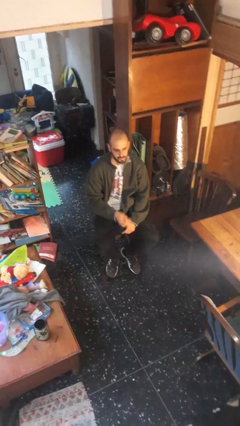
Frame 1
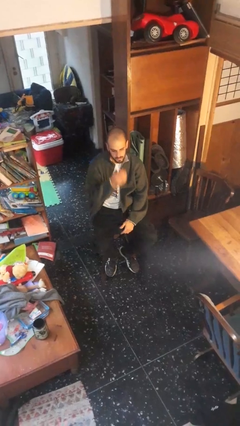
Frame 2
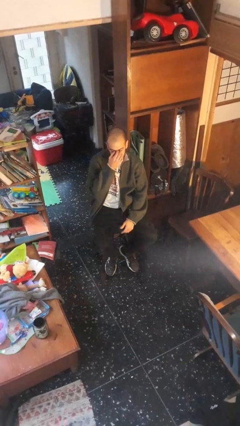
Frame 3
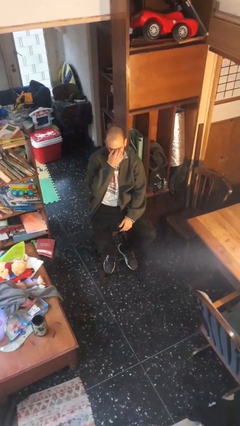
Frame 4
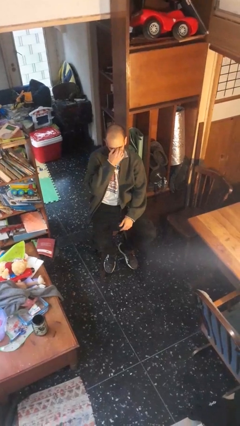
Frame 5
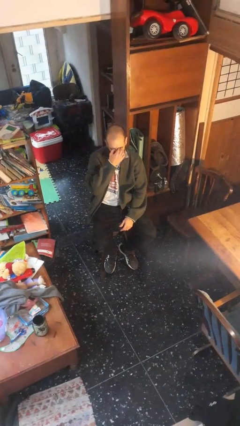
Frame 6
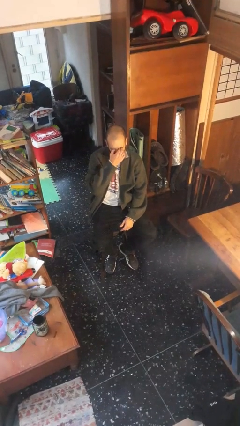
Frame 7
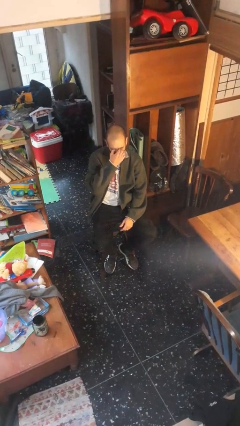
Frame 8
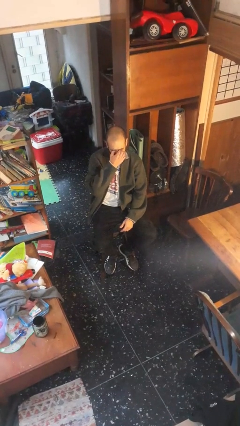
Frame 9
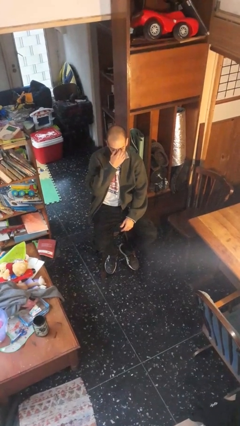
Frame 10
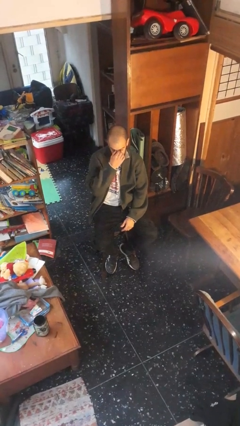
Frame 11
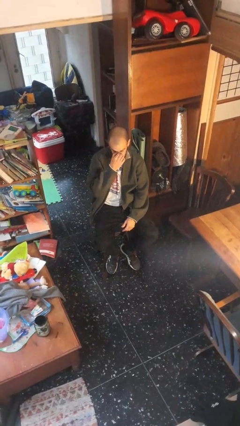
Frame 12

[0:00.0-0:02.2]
person rubs eyes

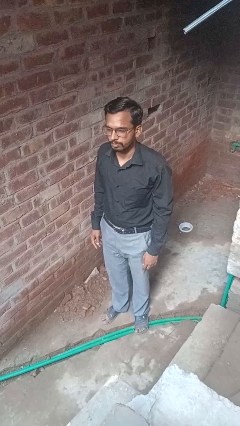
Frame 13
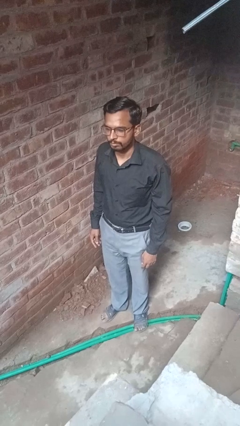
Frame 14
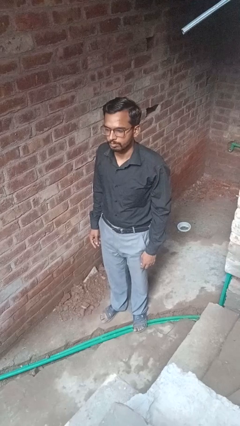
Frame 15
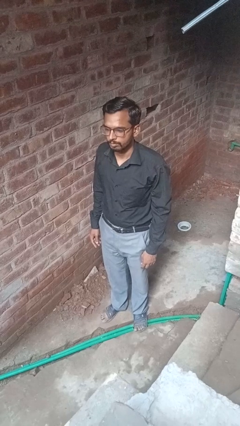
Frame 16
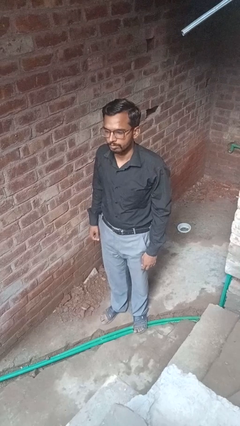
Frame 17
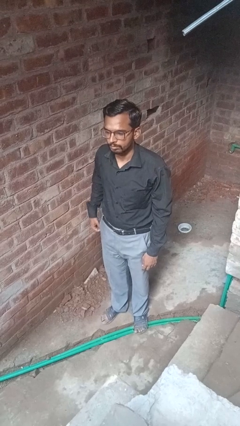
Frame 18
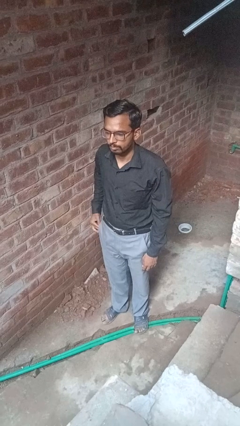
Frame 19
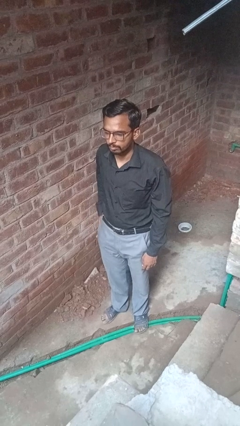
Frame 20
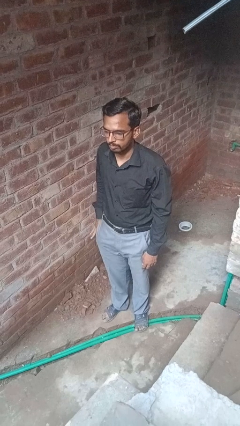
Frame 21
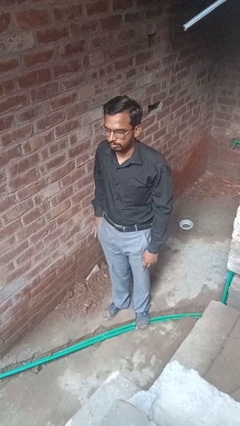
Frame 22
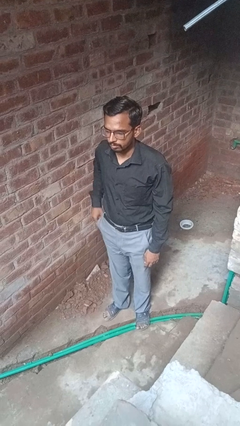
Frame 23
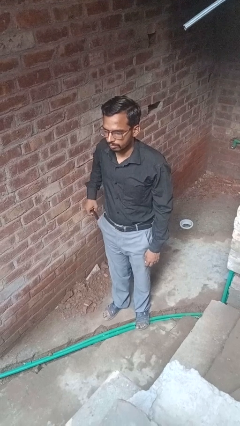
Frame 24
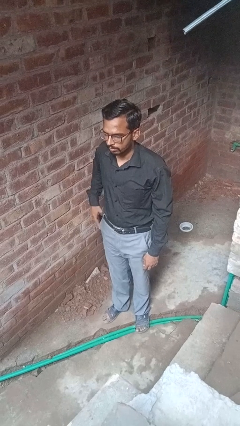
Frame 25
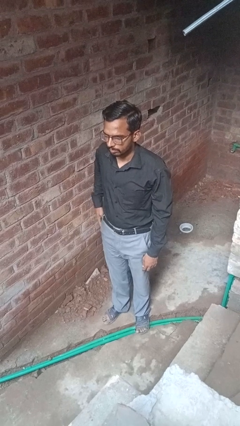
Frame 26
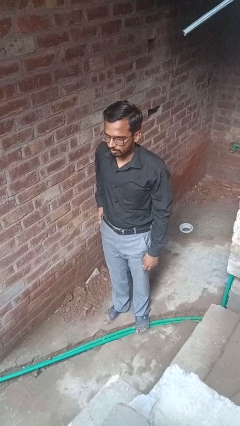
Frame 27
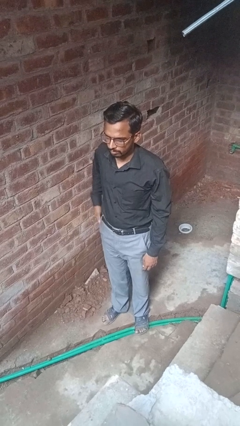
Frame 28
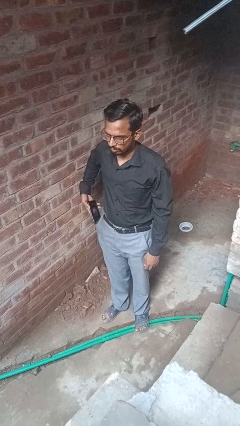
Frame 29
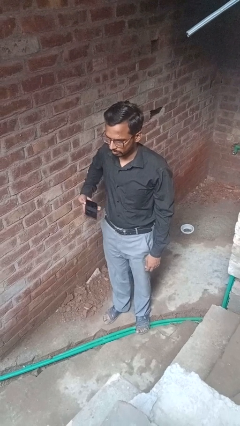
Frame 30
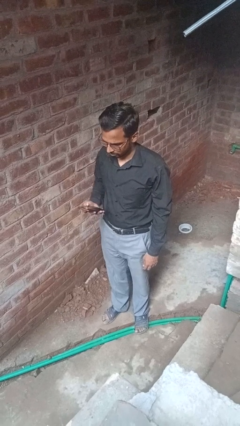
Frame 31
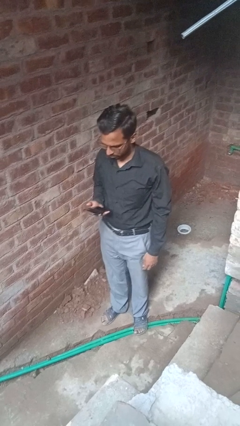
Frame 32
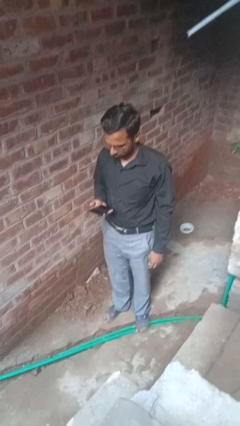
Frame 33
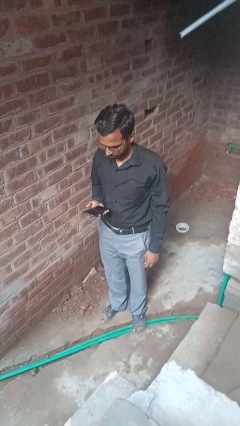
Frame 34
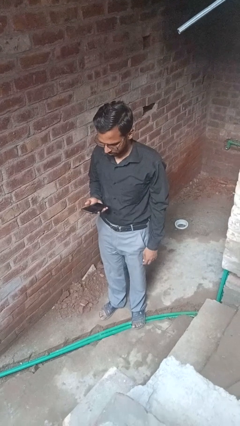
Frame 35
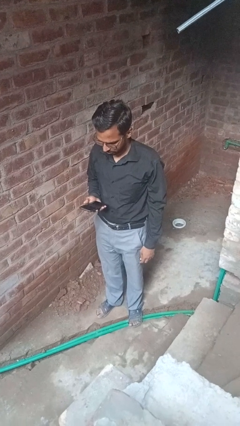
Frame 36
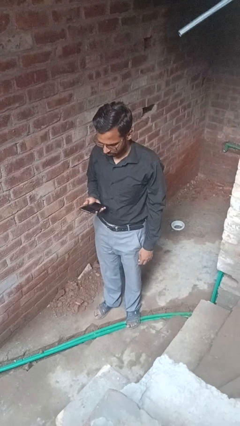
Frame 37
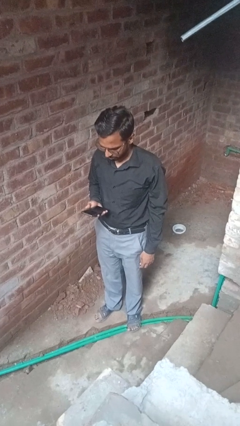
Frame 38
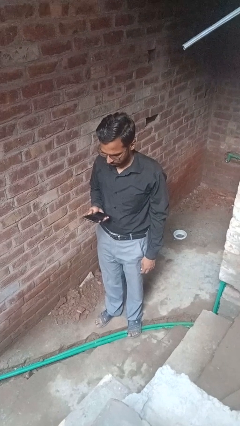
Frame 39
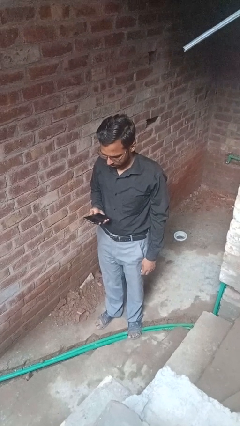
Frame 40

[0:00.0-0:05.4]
person takes phone from pocket

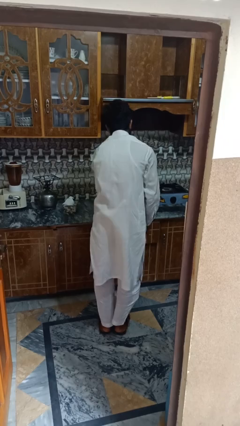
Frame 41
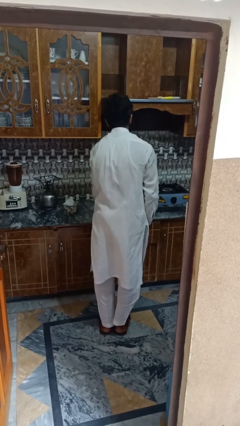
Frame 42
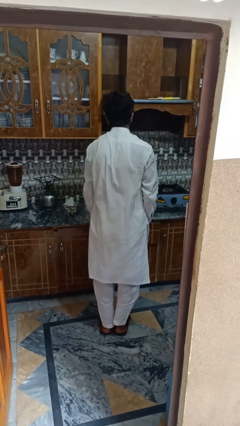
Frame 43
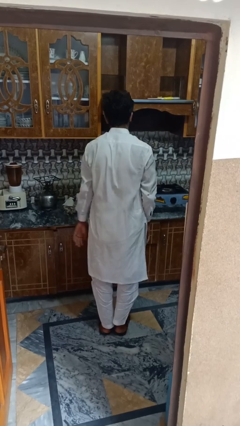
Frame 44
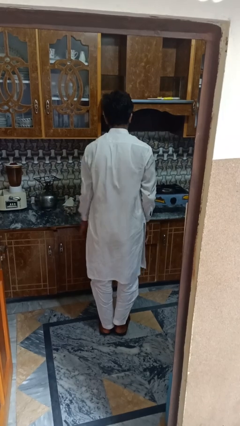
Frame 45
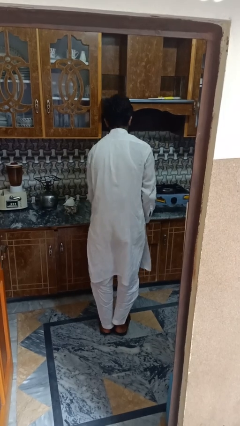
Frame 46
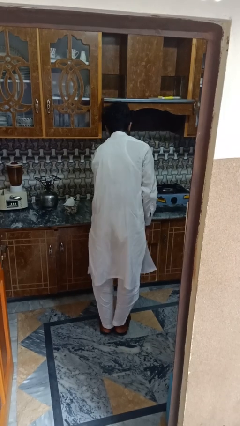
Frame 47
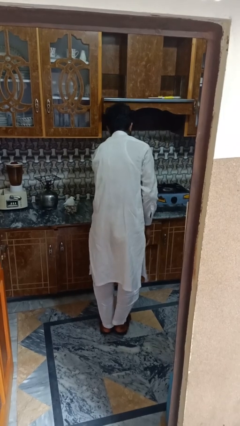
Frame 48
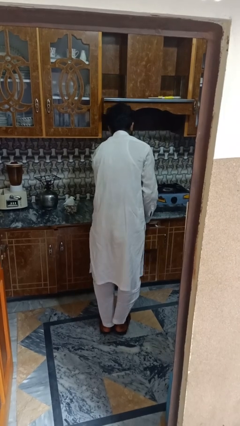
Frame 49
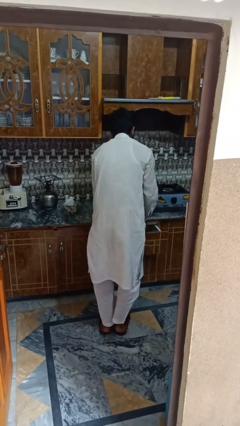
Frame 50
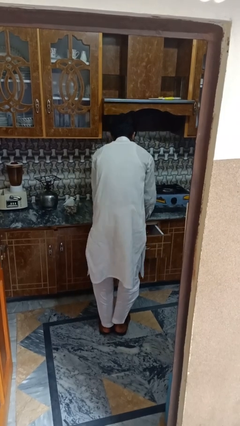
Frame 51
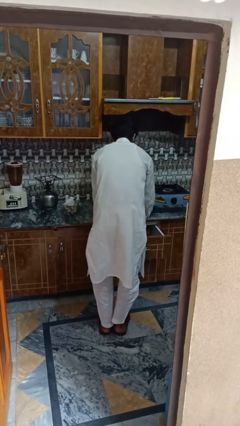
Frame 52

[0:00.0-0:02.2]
person searches in kitchen drawer

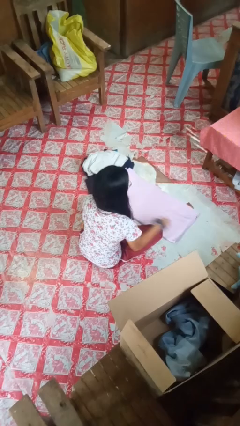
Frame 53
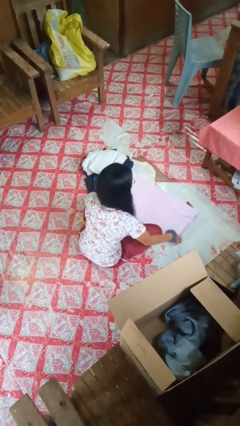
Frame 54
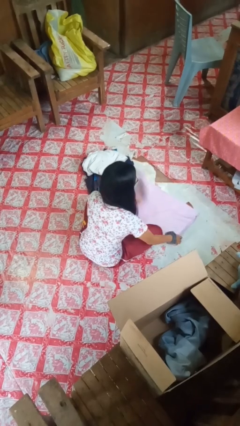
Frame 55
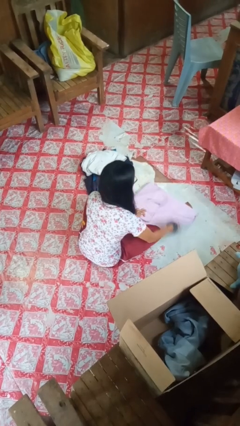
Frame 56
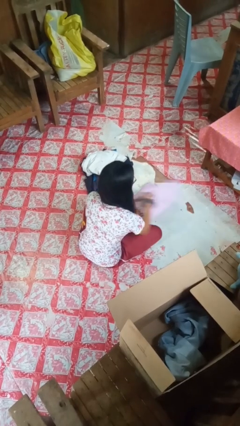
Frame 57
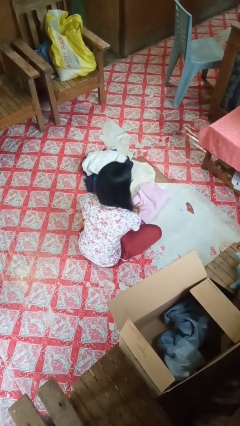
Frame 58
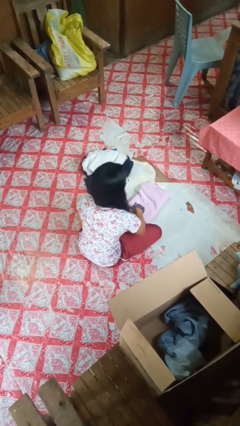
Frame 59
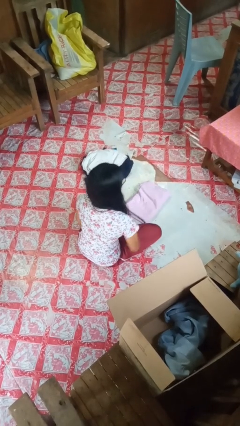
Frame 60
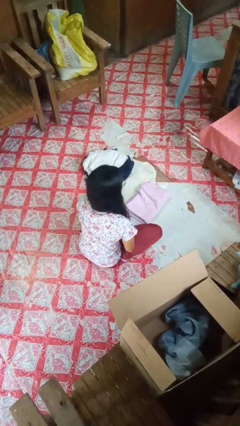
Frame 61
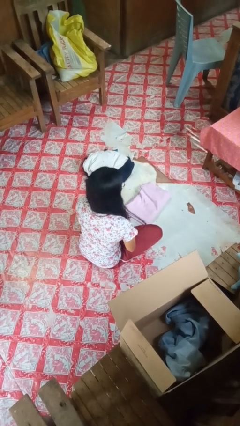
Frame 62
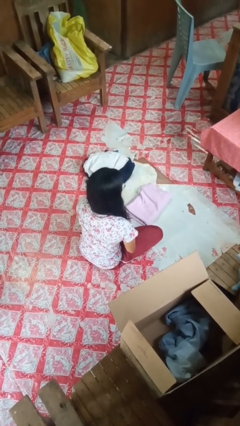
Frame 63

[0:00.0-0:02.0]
person folds towel

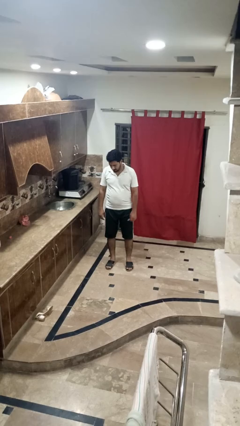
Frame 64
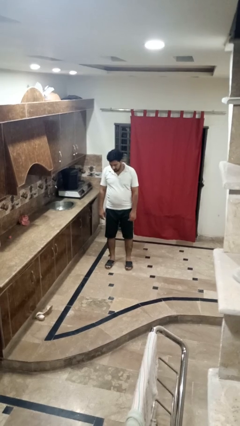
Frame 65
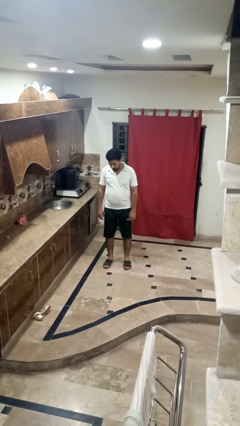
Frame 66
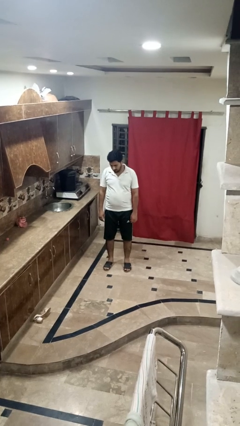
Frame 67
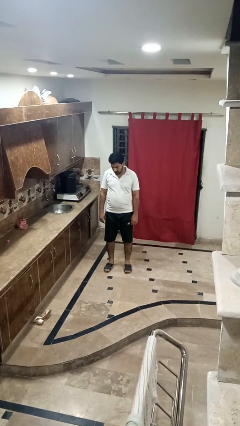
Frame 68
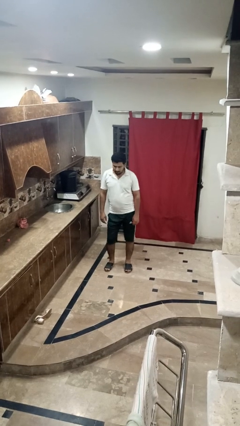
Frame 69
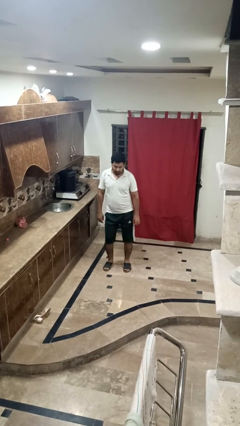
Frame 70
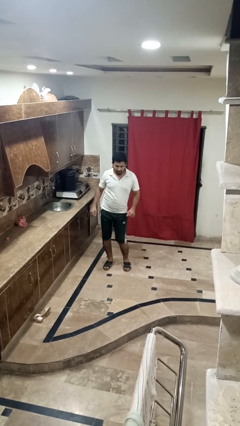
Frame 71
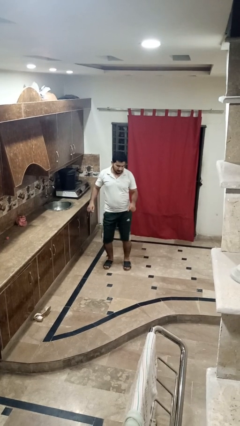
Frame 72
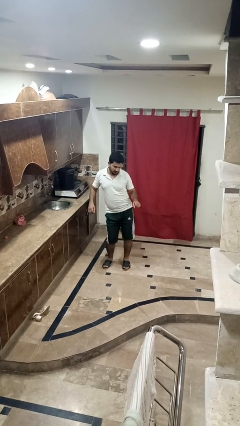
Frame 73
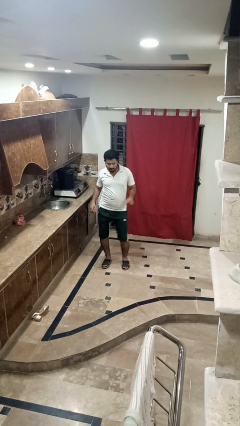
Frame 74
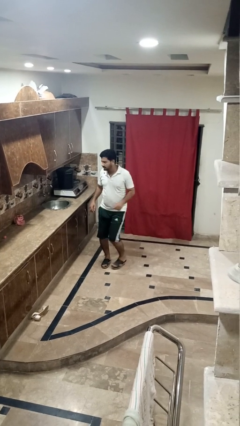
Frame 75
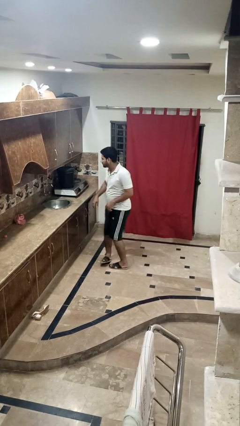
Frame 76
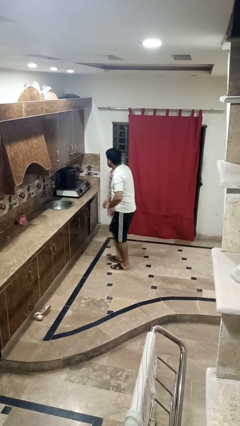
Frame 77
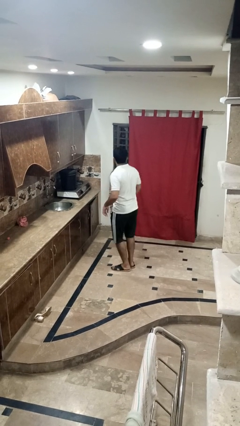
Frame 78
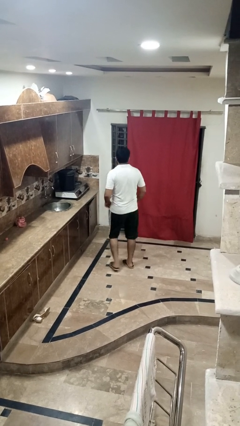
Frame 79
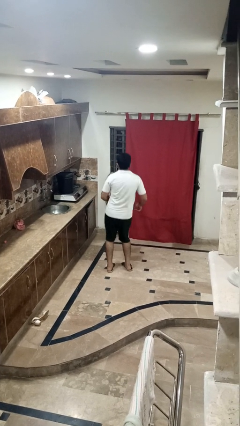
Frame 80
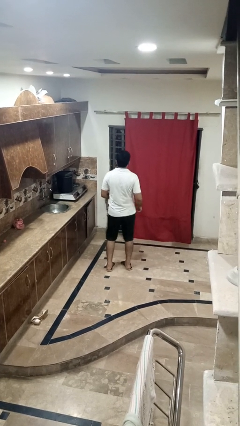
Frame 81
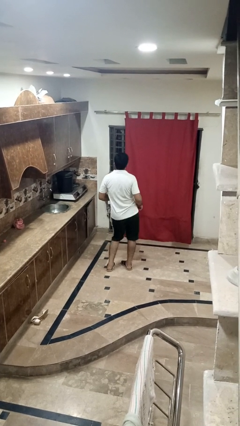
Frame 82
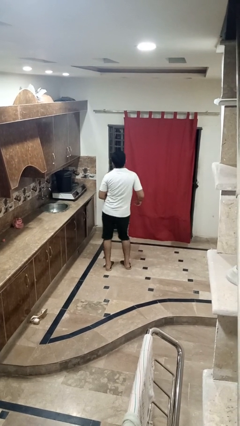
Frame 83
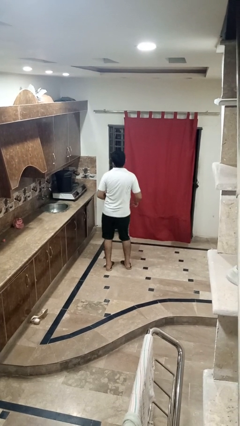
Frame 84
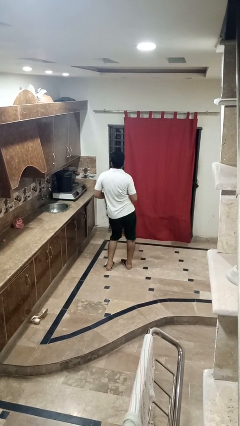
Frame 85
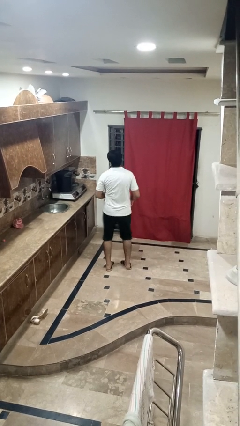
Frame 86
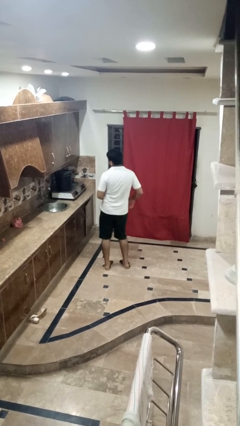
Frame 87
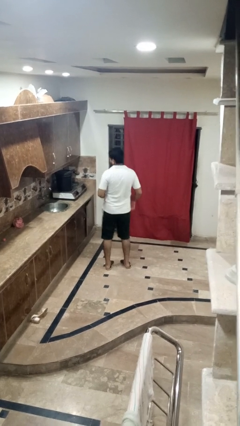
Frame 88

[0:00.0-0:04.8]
person wiggles hips

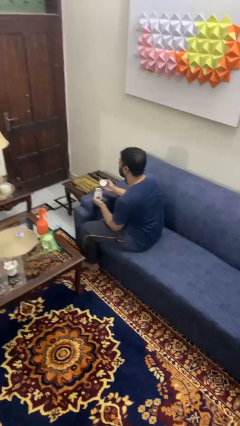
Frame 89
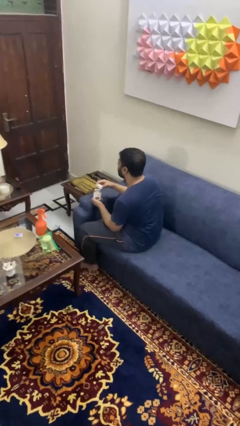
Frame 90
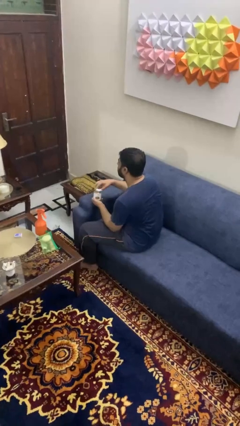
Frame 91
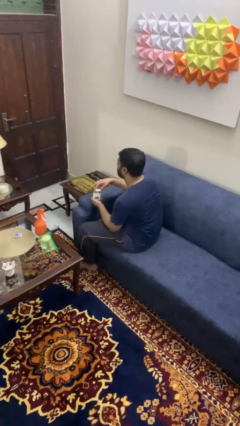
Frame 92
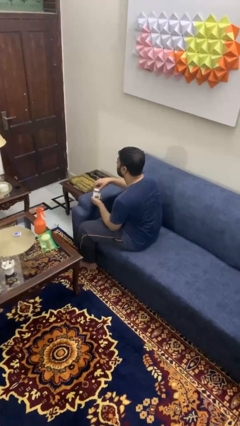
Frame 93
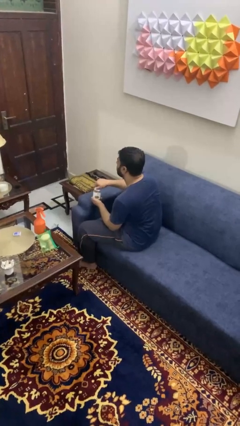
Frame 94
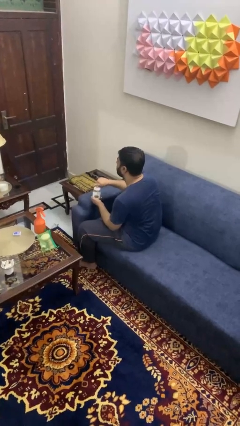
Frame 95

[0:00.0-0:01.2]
person closes jar
